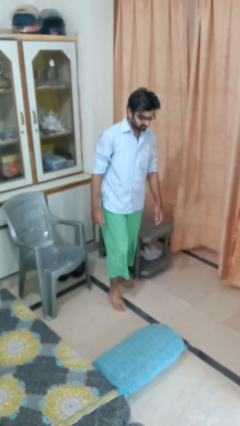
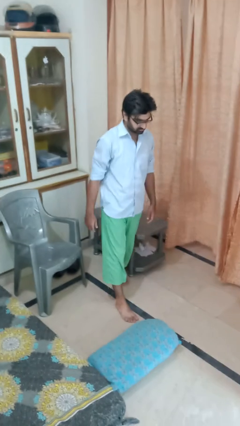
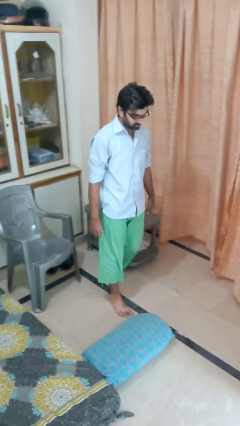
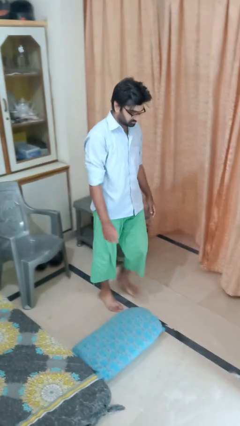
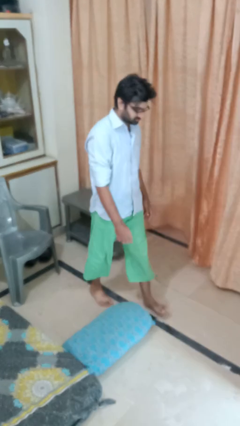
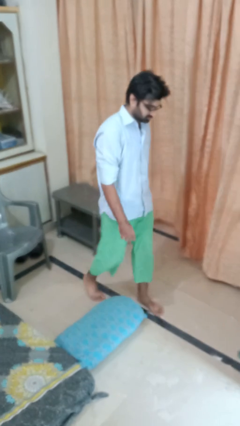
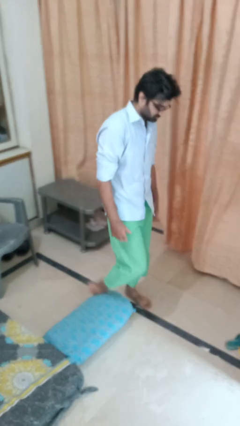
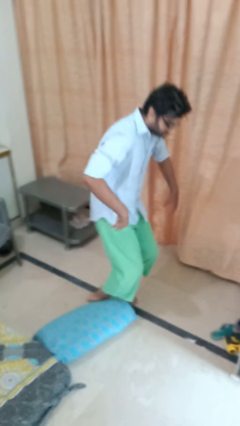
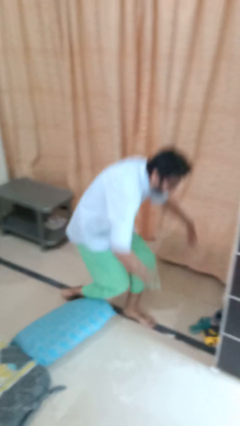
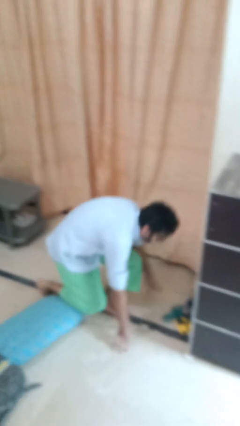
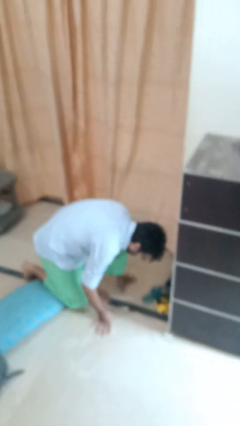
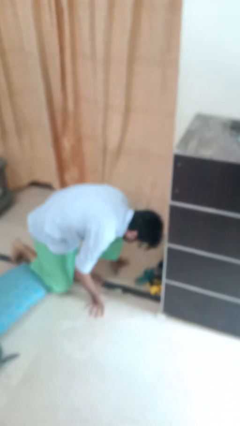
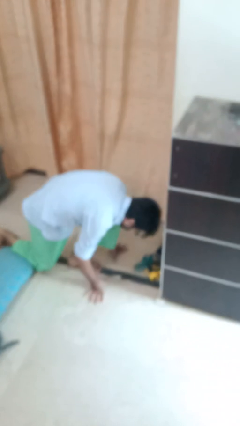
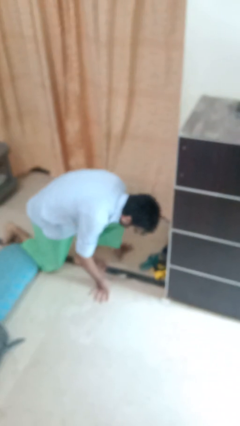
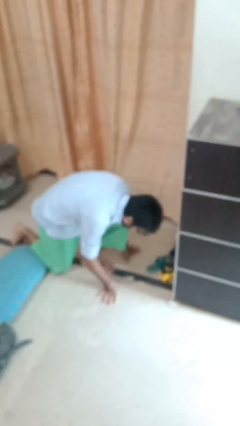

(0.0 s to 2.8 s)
person trips on object on floor

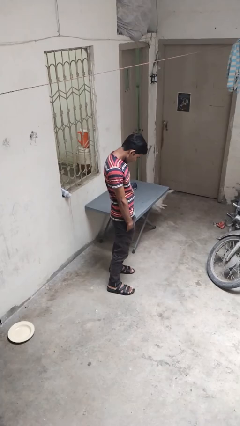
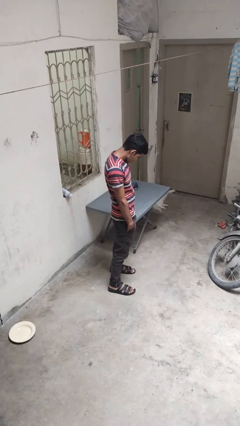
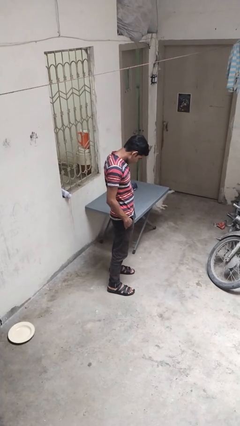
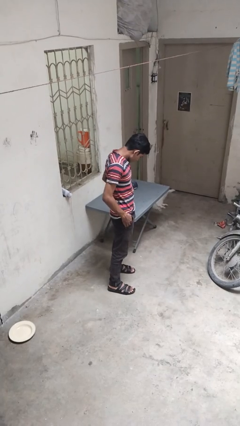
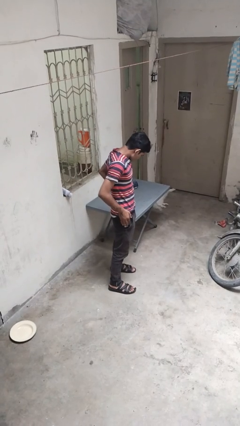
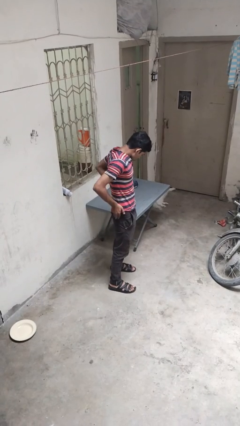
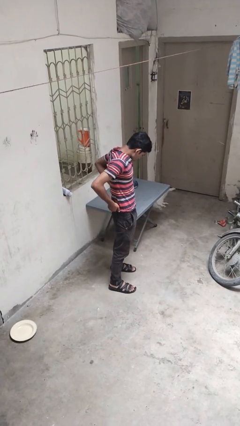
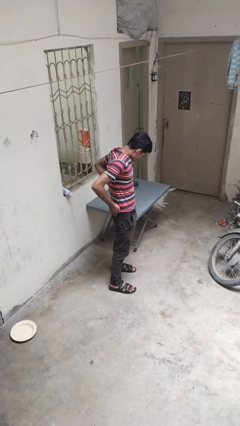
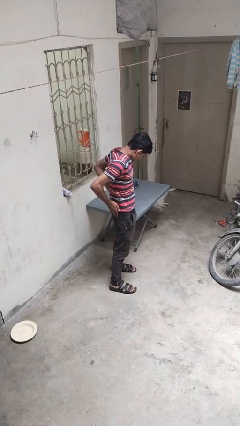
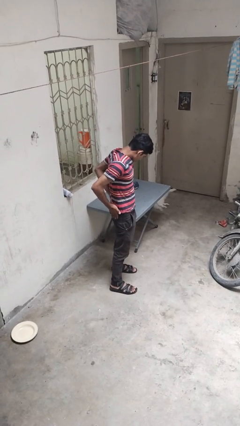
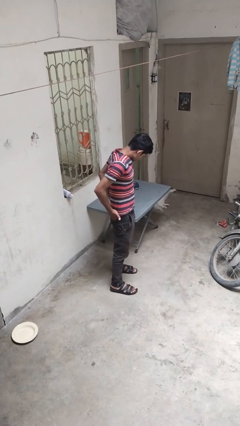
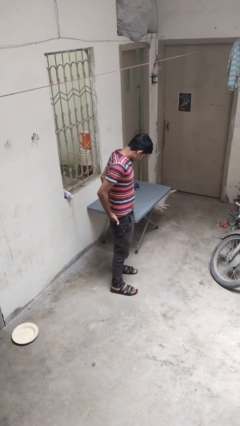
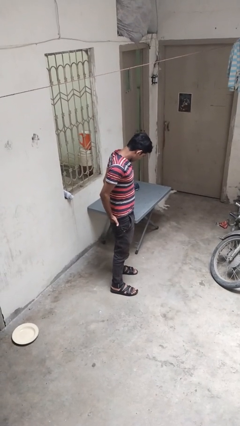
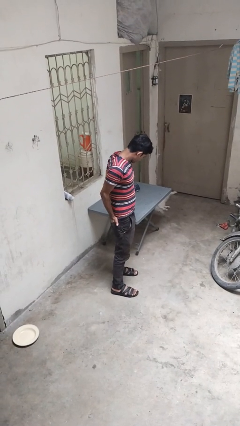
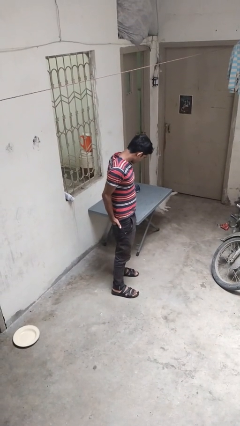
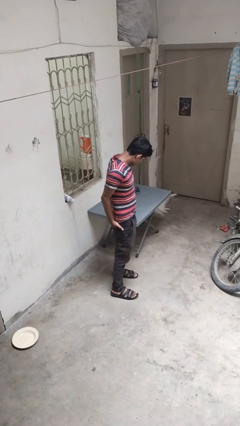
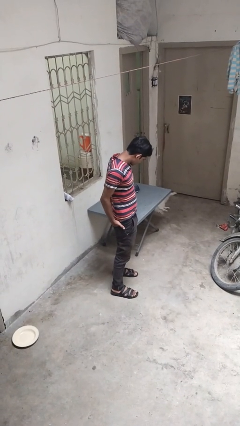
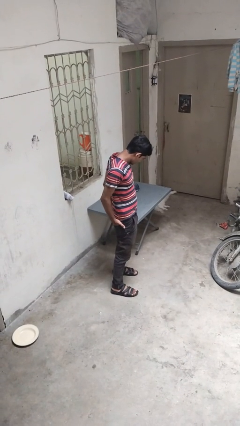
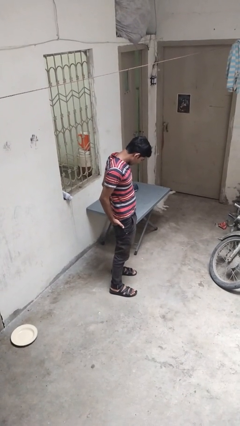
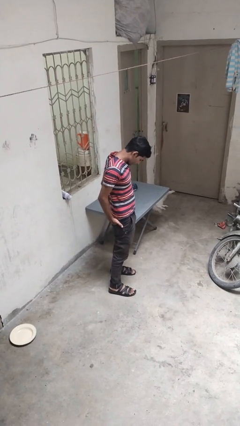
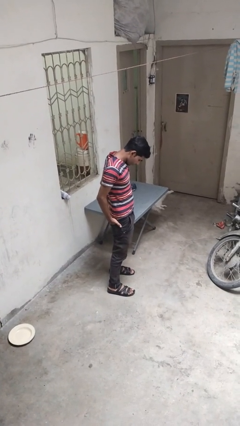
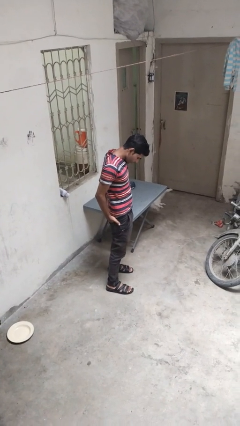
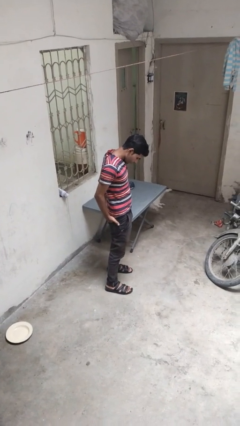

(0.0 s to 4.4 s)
person puts hands in back pockets

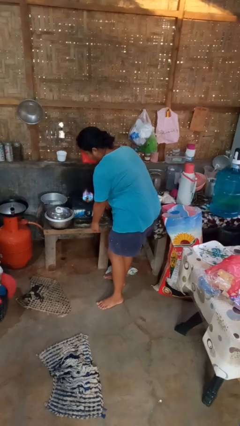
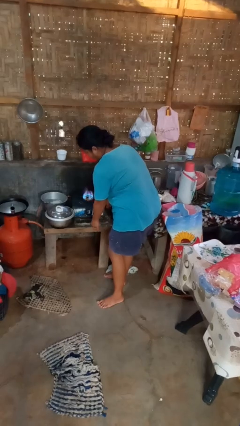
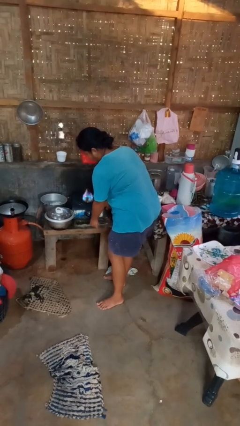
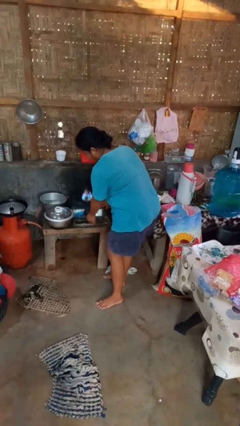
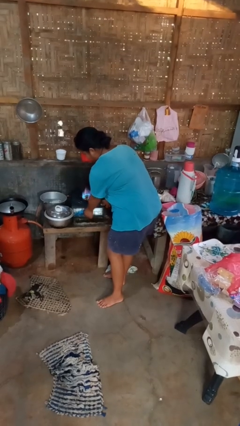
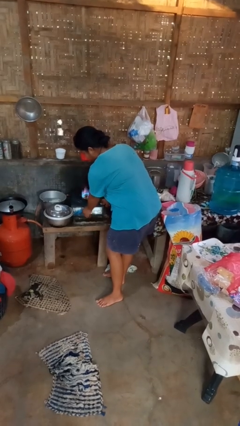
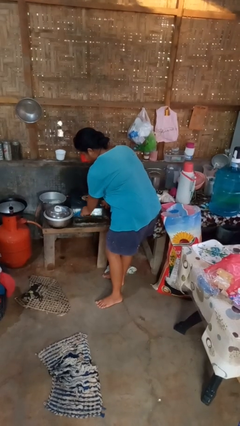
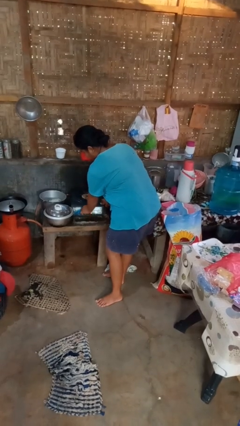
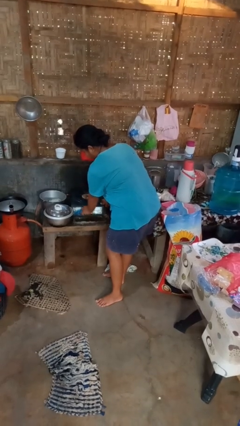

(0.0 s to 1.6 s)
person turns off stovetop

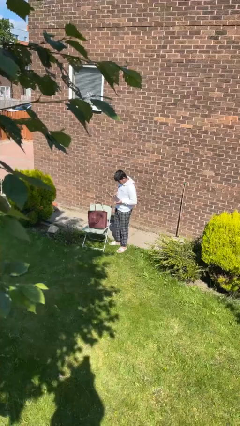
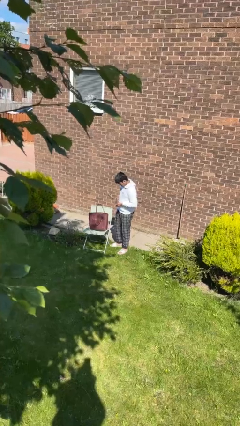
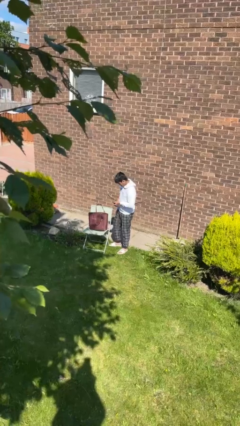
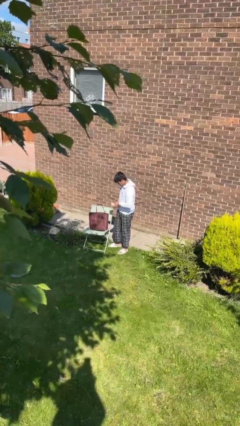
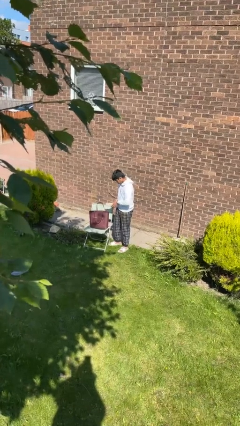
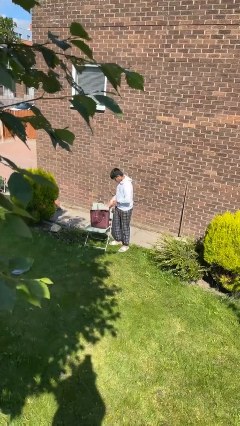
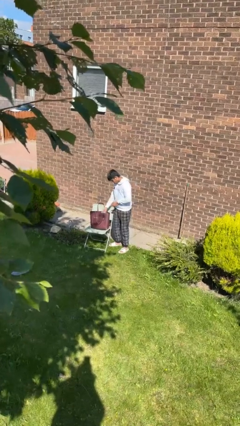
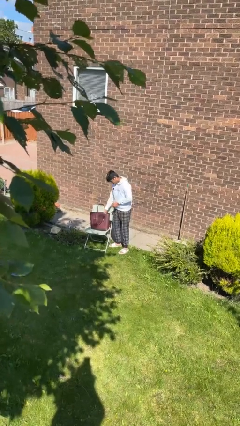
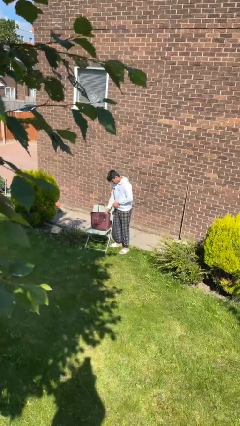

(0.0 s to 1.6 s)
person puts object into purse

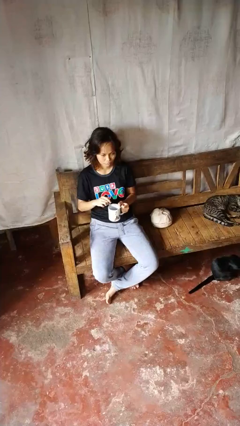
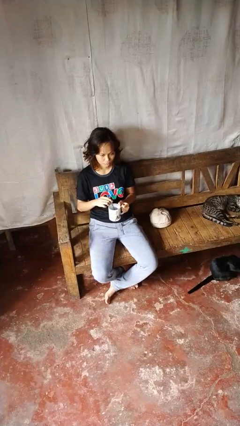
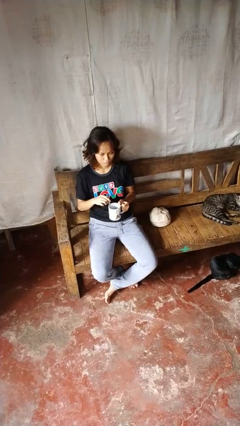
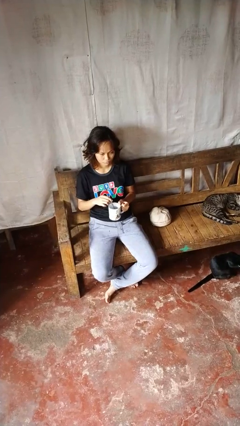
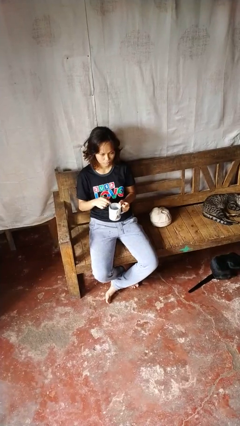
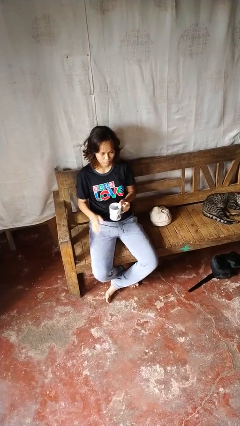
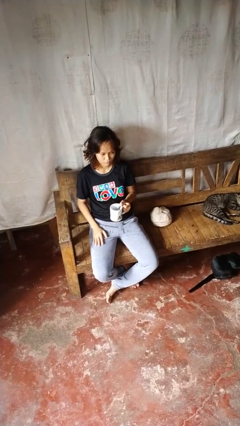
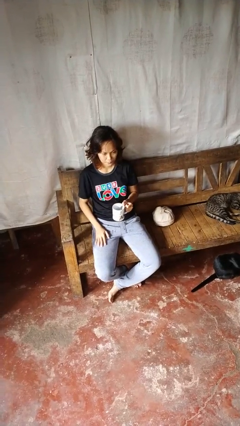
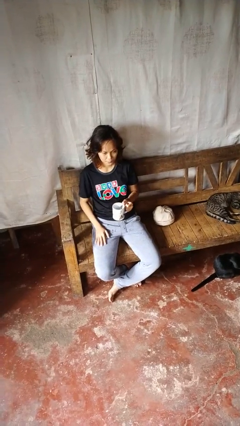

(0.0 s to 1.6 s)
person stirs mug

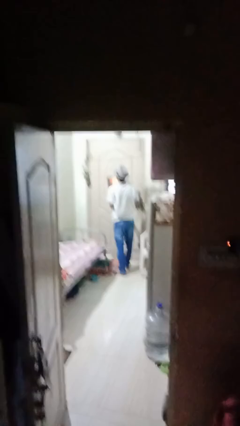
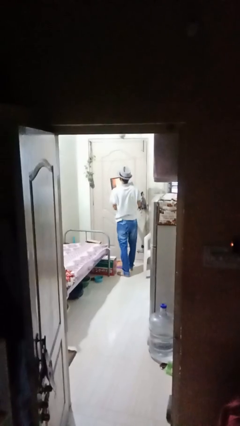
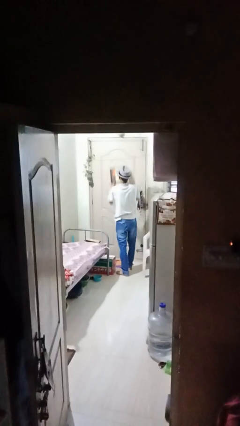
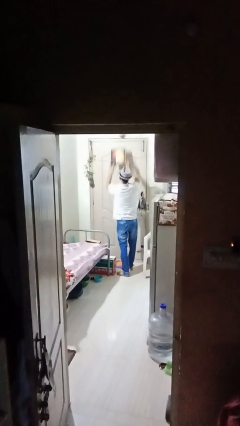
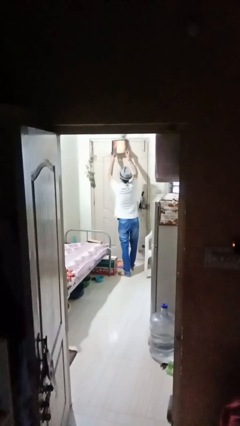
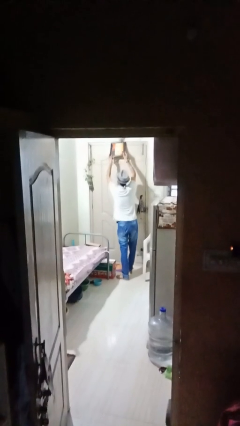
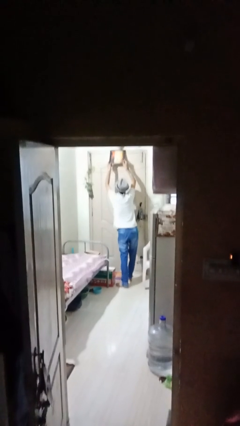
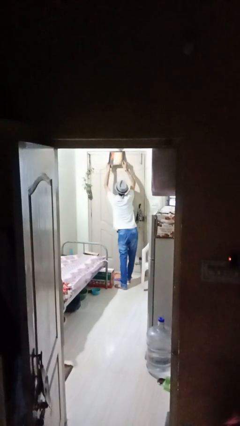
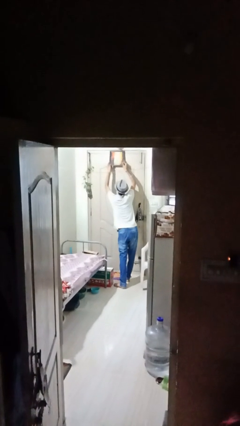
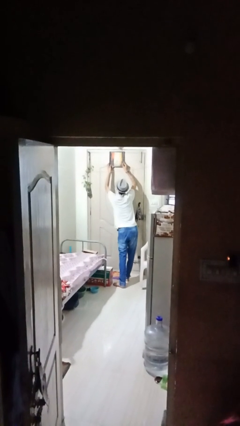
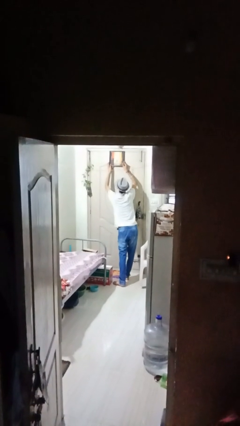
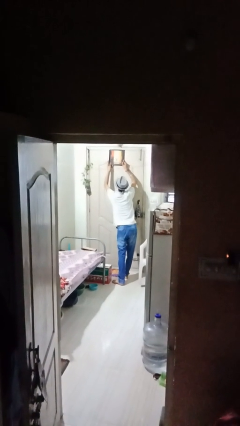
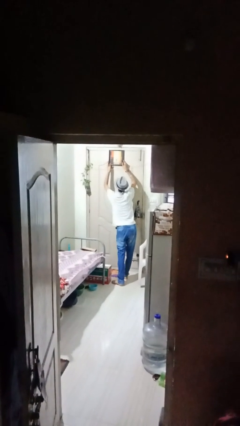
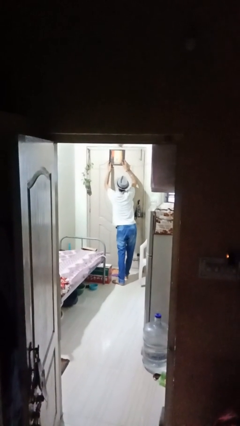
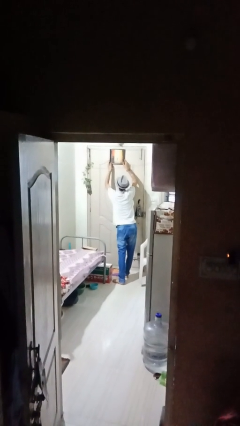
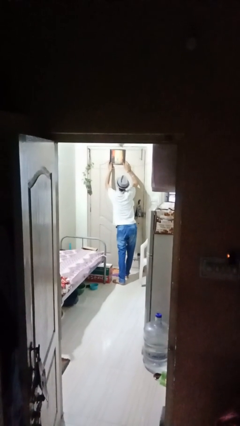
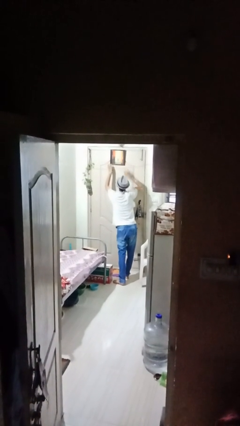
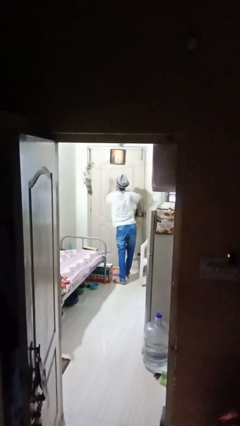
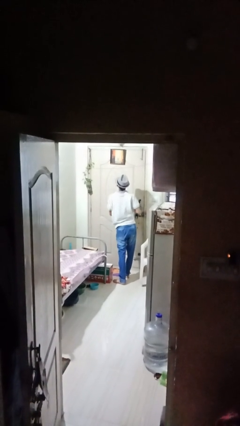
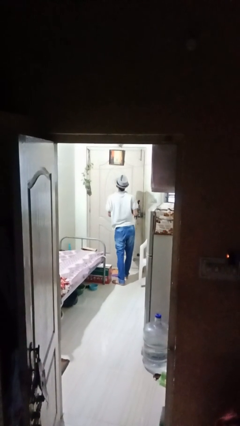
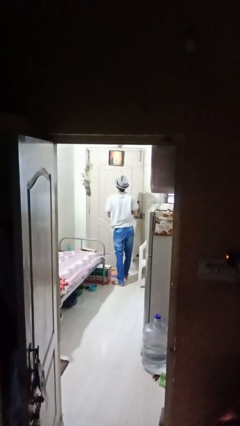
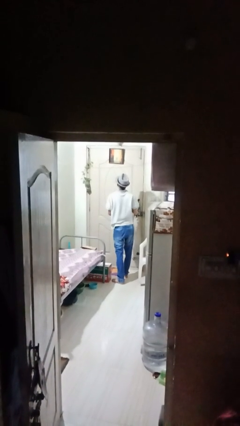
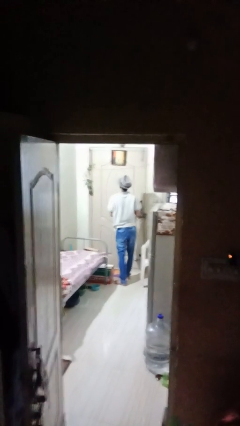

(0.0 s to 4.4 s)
person puts up picture frame

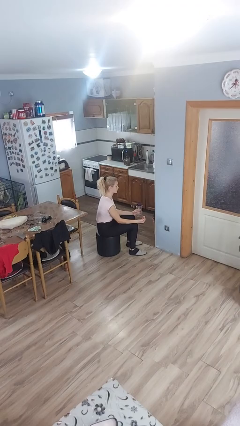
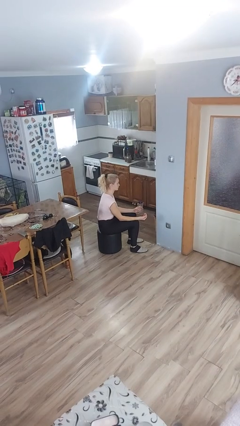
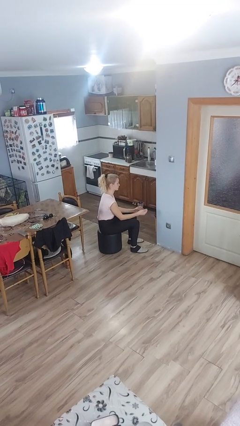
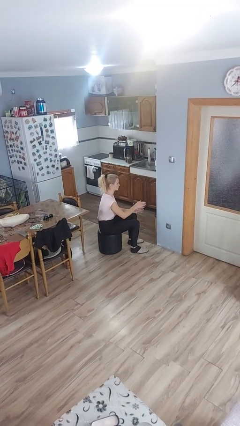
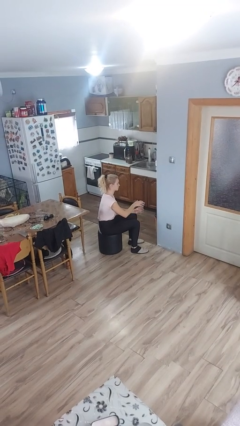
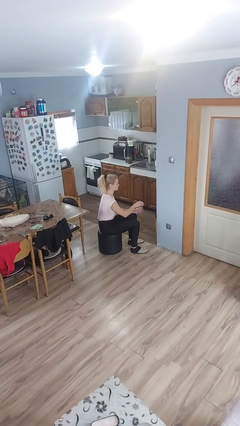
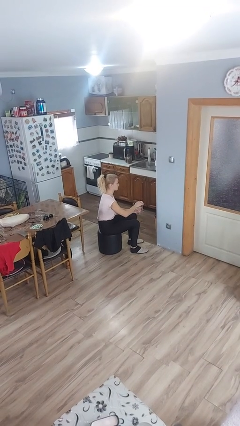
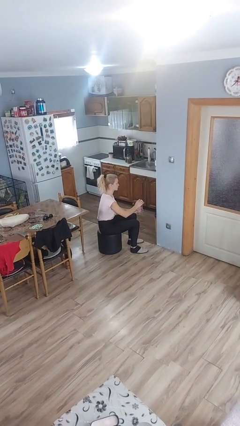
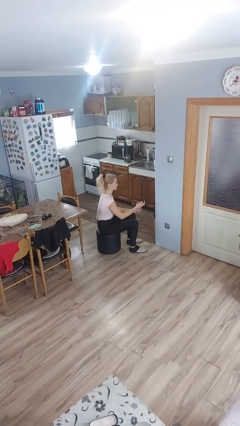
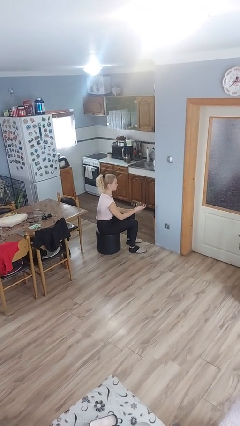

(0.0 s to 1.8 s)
person opens jar
